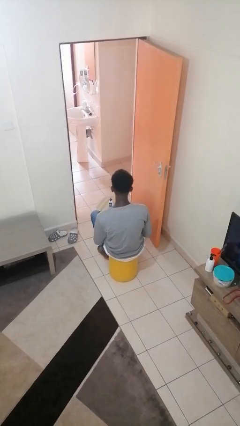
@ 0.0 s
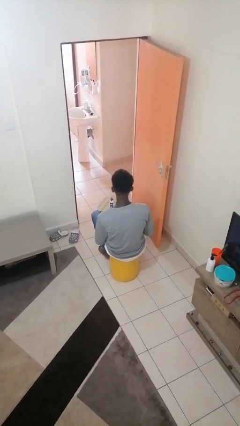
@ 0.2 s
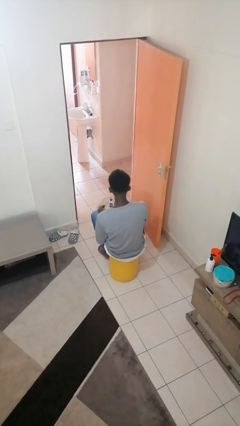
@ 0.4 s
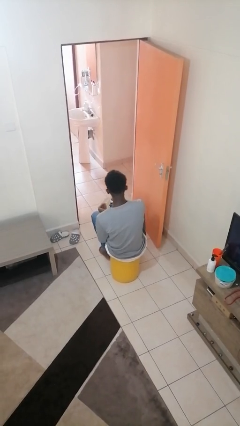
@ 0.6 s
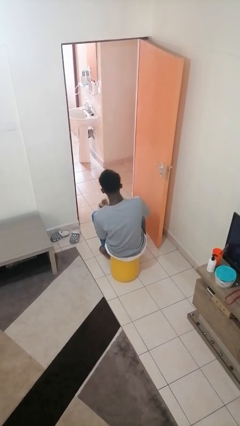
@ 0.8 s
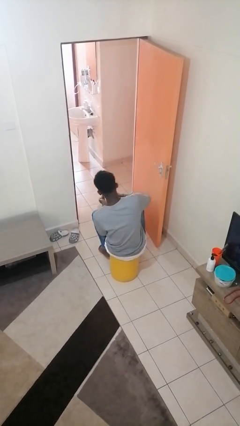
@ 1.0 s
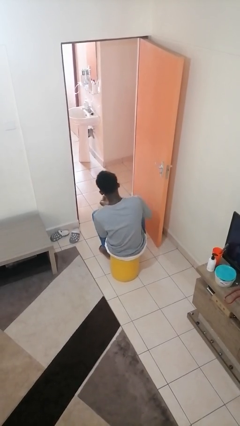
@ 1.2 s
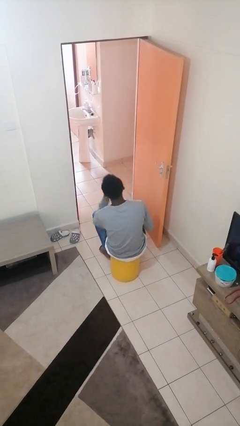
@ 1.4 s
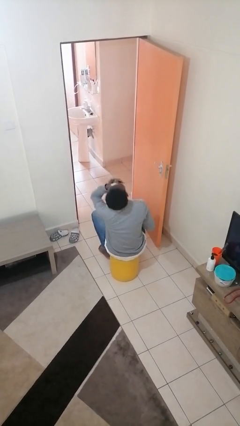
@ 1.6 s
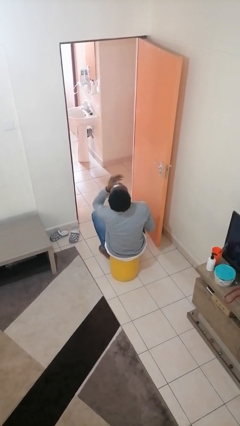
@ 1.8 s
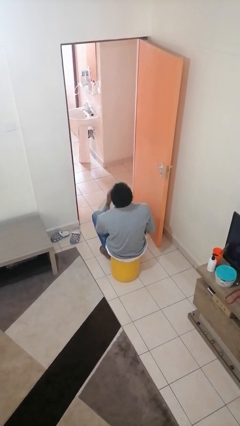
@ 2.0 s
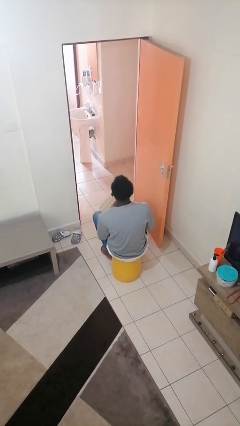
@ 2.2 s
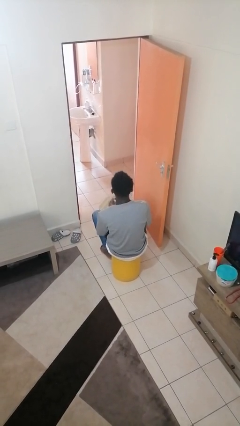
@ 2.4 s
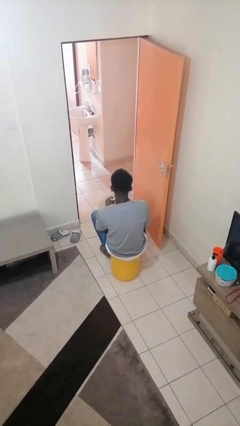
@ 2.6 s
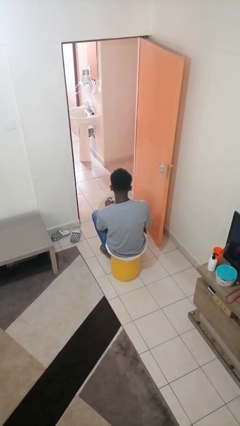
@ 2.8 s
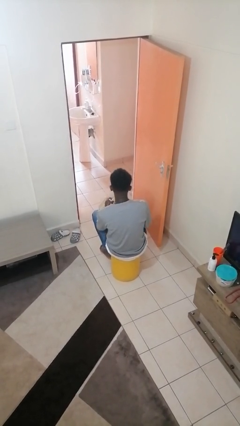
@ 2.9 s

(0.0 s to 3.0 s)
person takes medicine pills

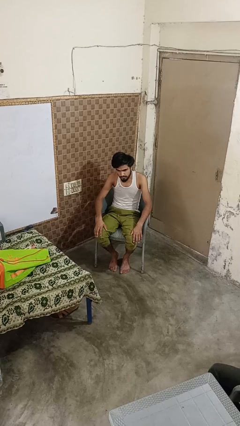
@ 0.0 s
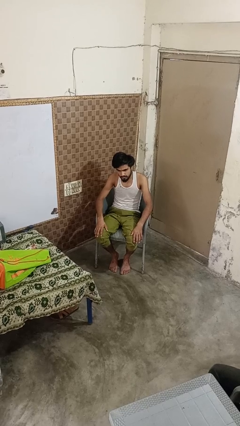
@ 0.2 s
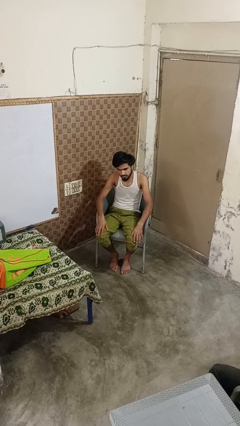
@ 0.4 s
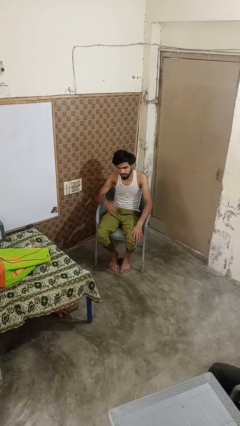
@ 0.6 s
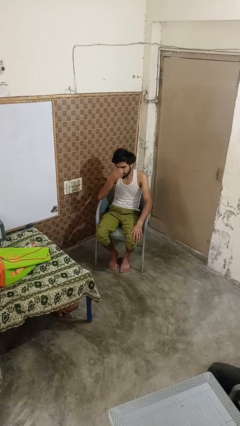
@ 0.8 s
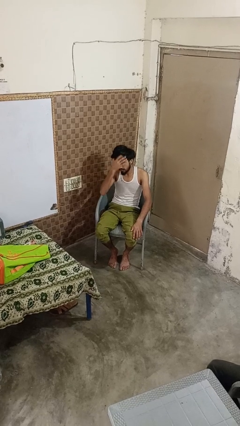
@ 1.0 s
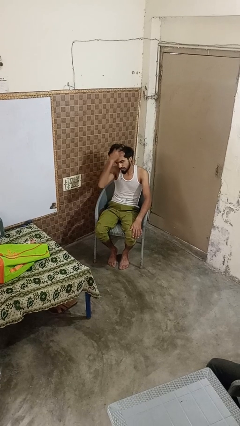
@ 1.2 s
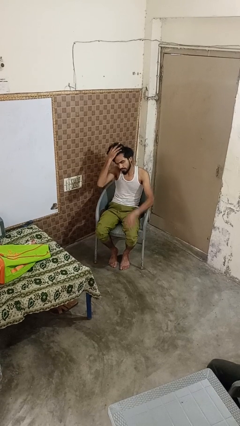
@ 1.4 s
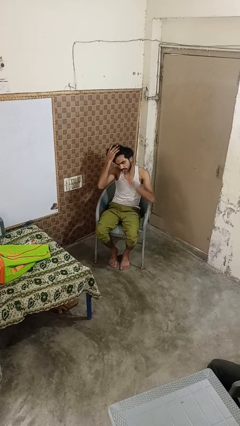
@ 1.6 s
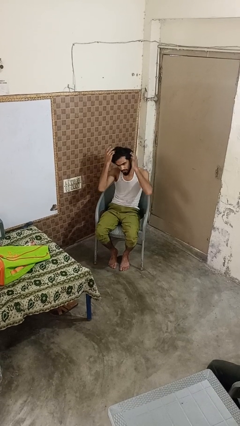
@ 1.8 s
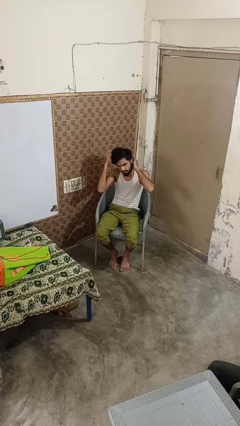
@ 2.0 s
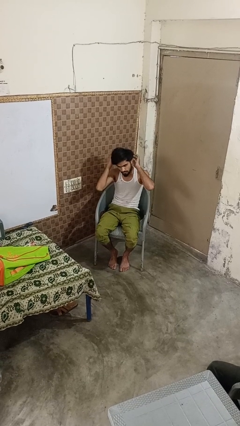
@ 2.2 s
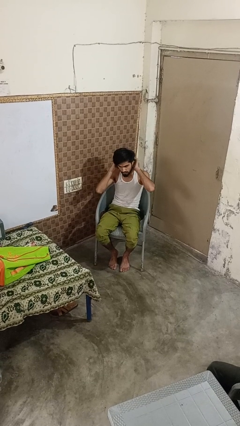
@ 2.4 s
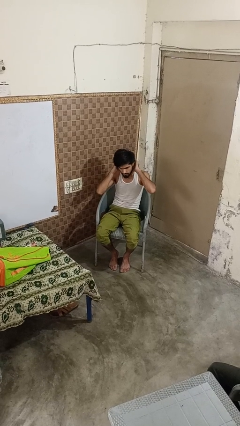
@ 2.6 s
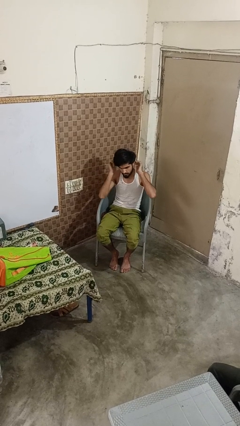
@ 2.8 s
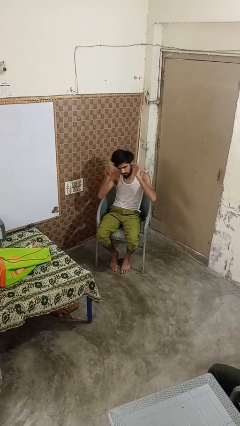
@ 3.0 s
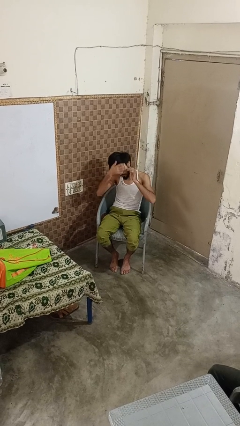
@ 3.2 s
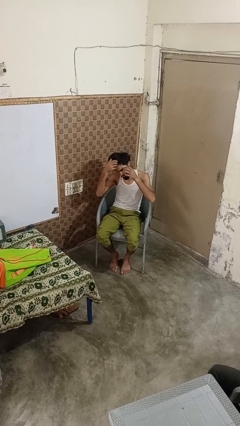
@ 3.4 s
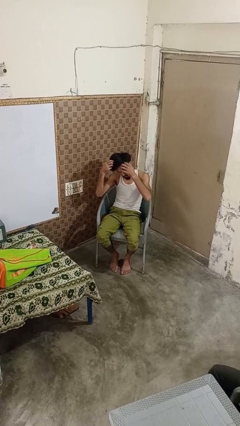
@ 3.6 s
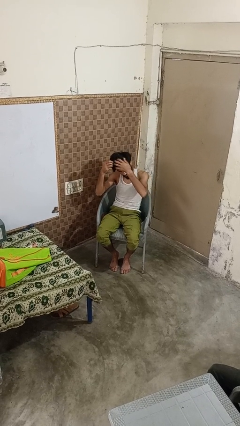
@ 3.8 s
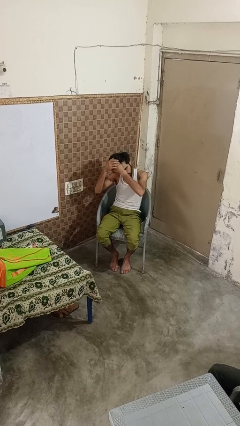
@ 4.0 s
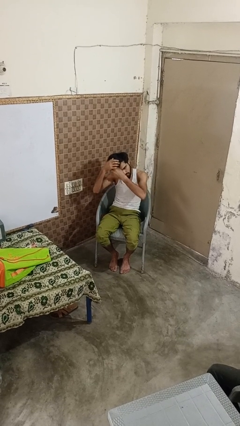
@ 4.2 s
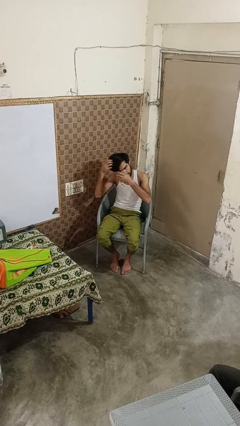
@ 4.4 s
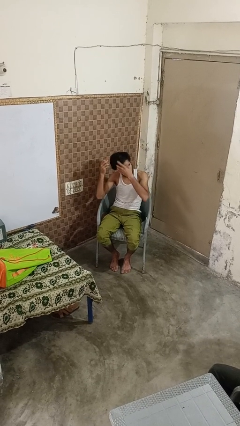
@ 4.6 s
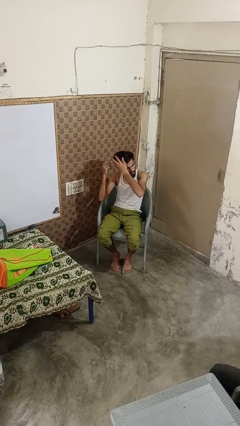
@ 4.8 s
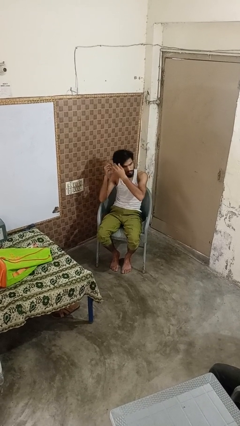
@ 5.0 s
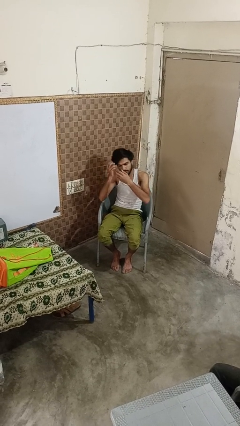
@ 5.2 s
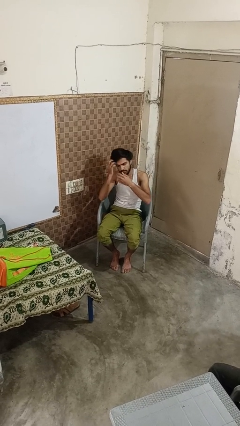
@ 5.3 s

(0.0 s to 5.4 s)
person strokes hair

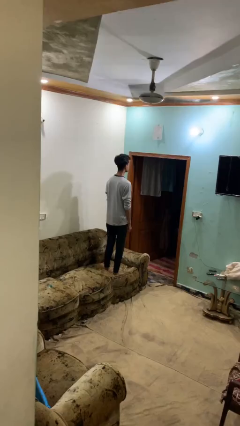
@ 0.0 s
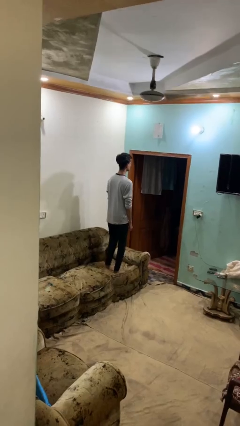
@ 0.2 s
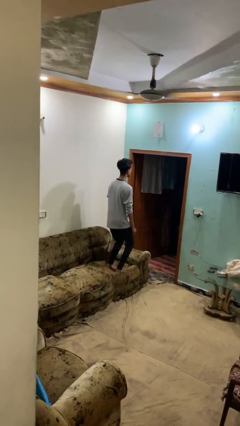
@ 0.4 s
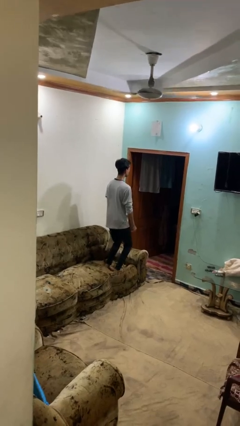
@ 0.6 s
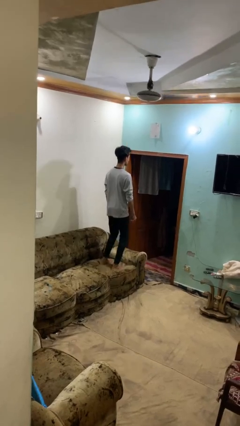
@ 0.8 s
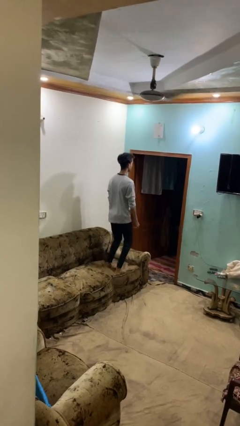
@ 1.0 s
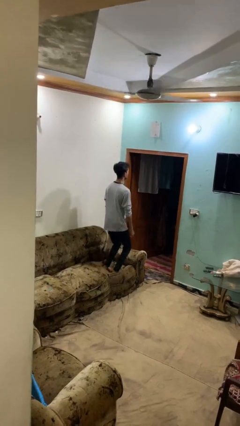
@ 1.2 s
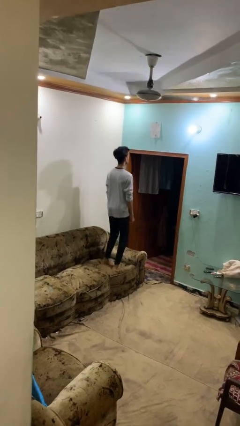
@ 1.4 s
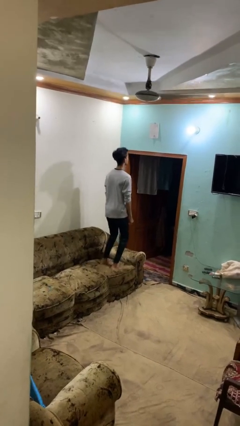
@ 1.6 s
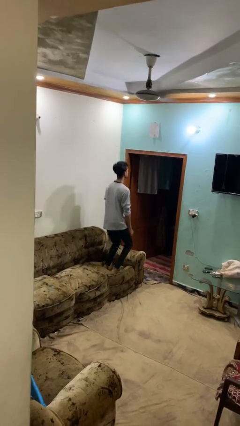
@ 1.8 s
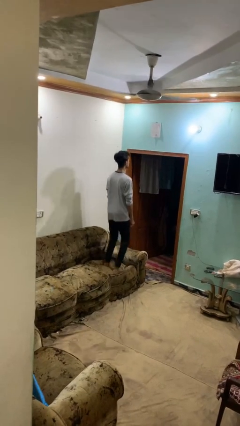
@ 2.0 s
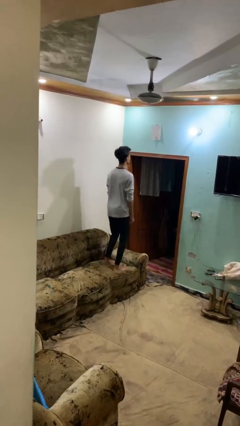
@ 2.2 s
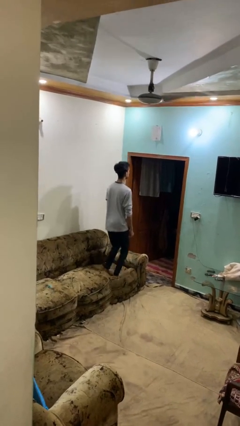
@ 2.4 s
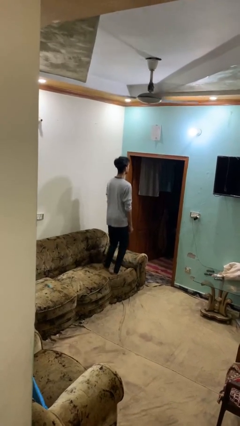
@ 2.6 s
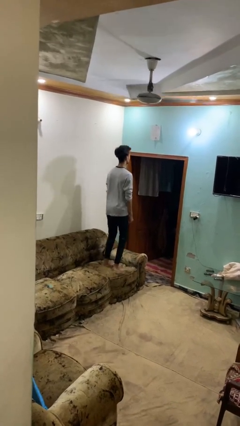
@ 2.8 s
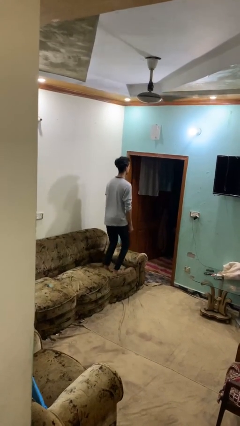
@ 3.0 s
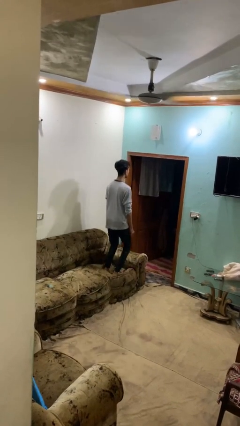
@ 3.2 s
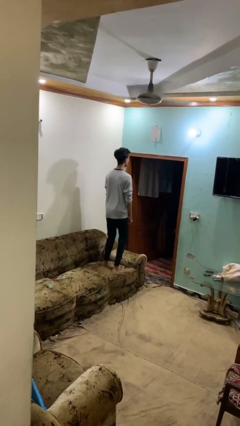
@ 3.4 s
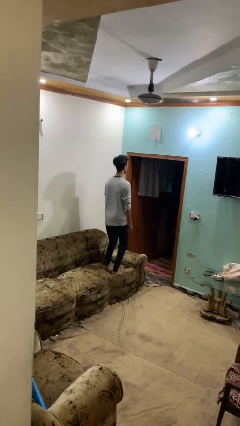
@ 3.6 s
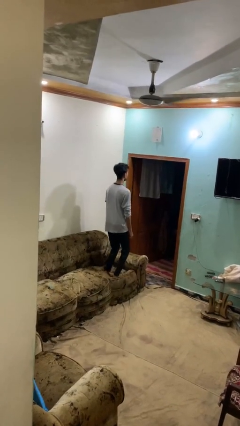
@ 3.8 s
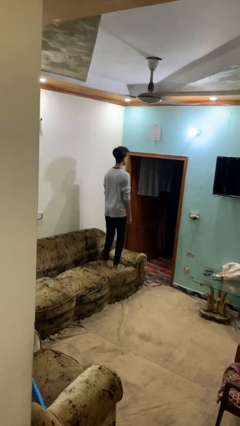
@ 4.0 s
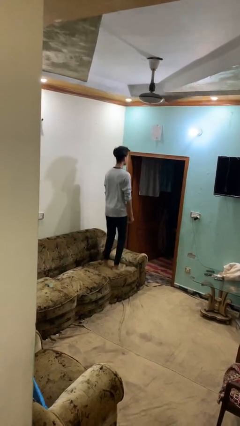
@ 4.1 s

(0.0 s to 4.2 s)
person jumps on couch

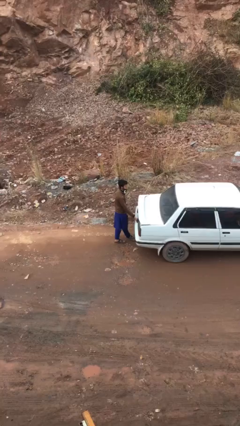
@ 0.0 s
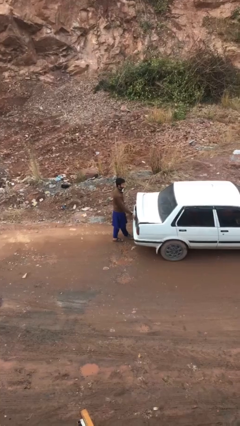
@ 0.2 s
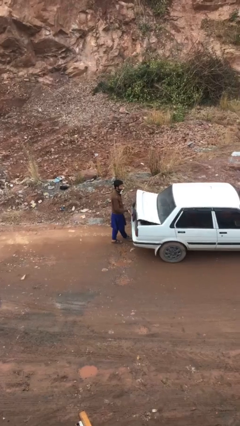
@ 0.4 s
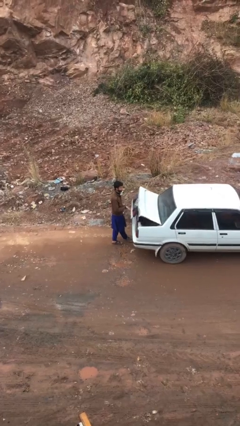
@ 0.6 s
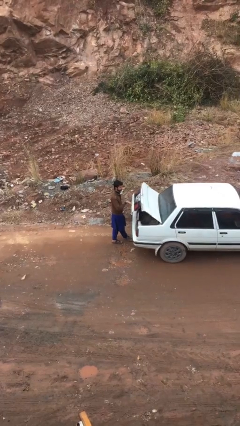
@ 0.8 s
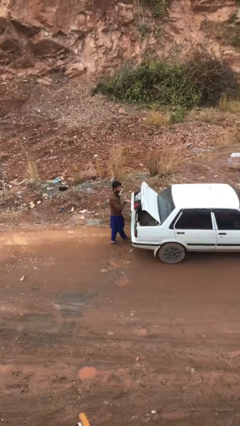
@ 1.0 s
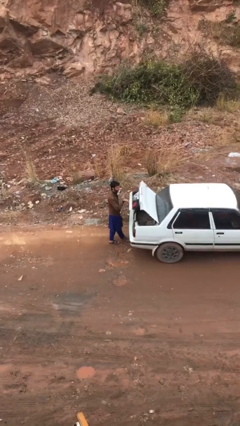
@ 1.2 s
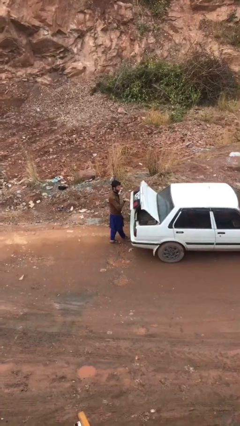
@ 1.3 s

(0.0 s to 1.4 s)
person opens car trunk

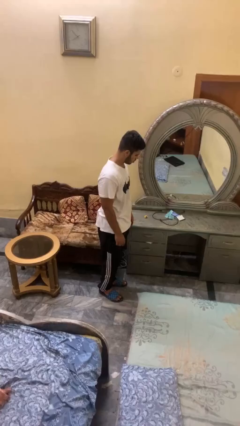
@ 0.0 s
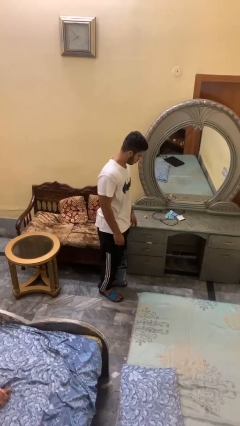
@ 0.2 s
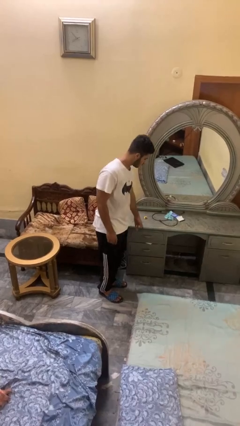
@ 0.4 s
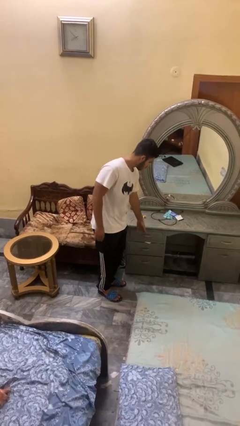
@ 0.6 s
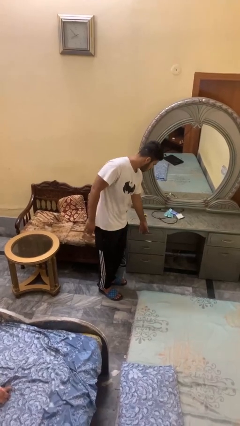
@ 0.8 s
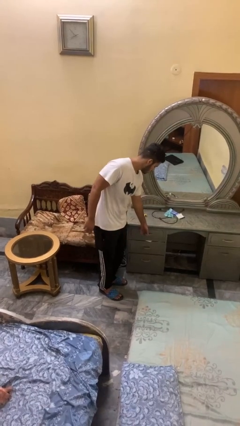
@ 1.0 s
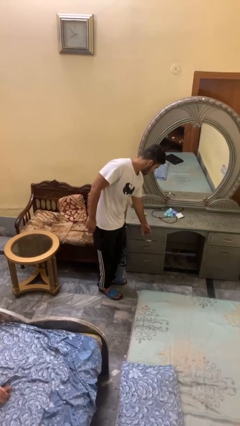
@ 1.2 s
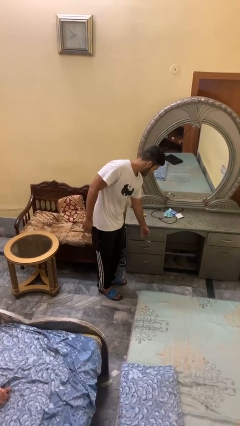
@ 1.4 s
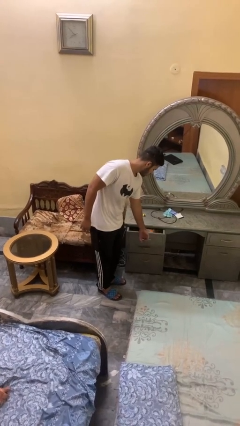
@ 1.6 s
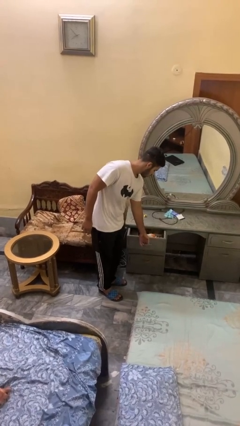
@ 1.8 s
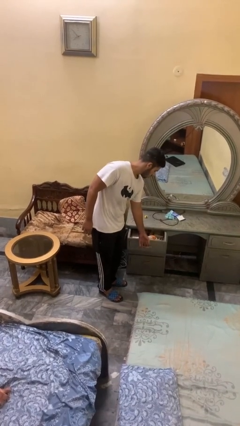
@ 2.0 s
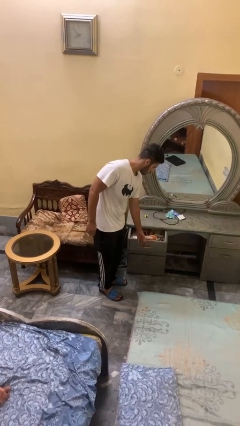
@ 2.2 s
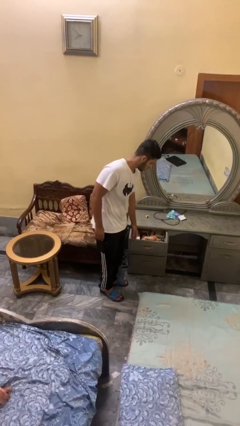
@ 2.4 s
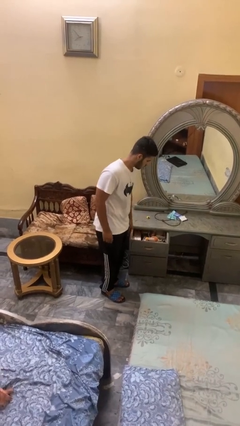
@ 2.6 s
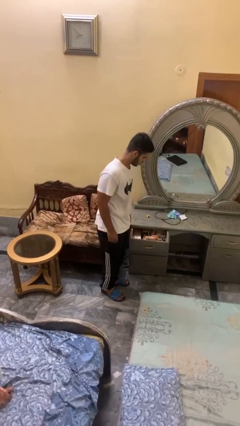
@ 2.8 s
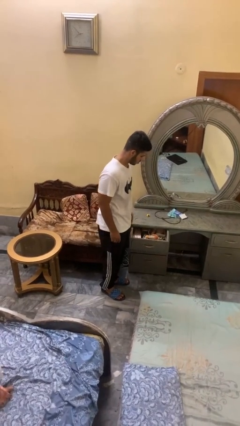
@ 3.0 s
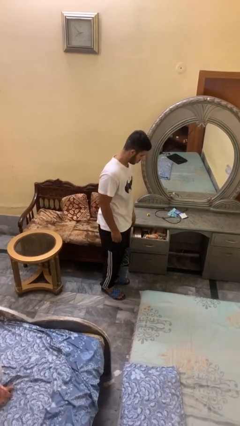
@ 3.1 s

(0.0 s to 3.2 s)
person opens dresser drawer
